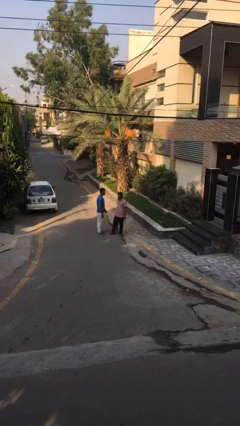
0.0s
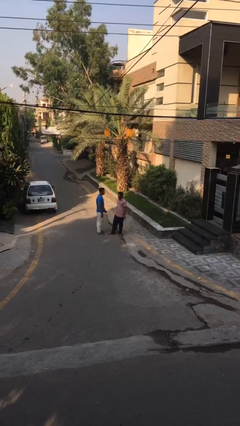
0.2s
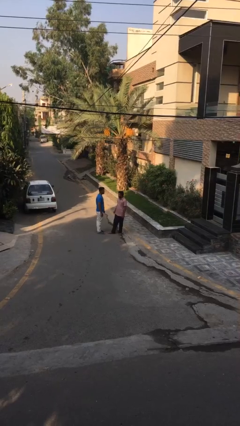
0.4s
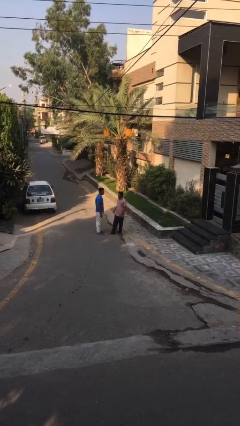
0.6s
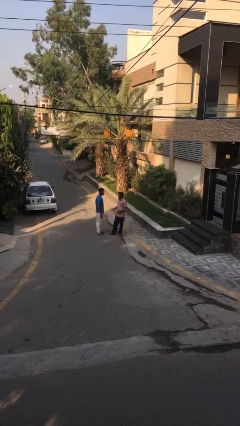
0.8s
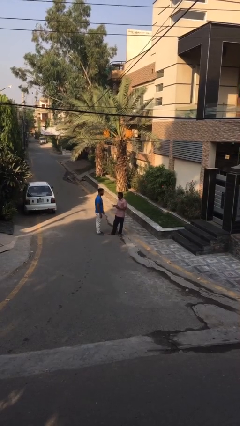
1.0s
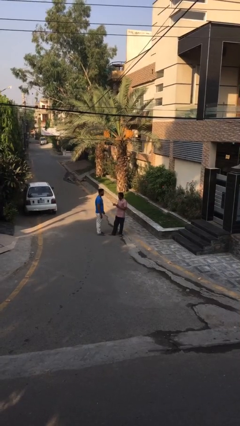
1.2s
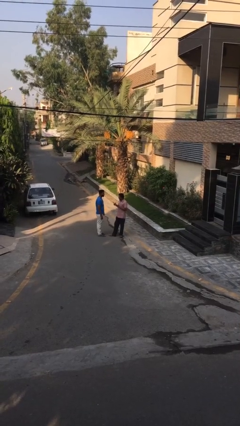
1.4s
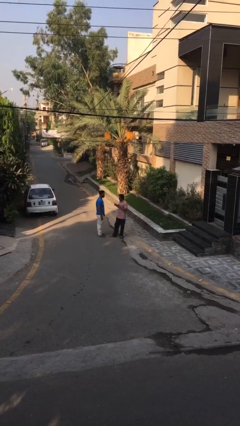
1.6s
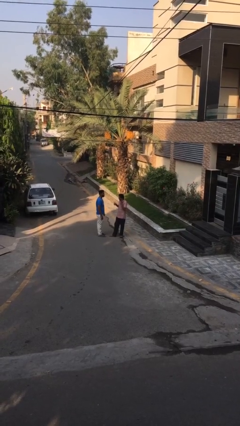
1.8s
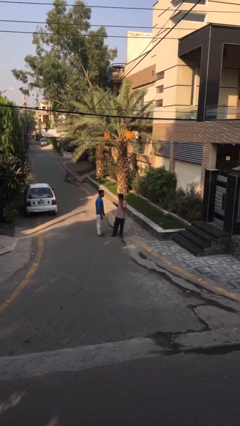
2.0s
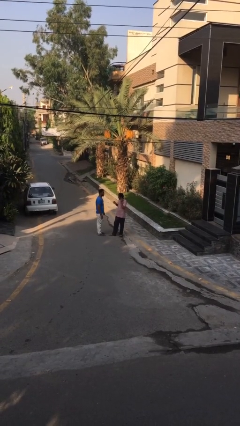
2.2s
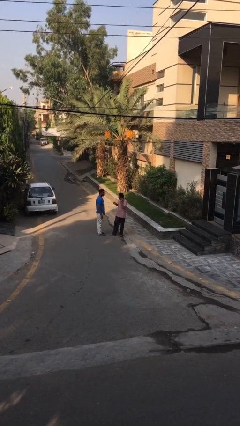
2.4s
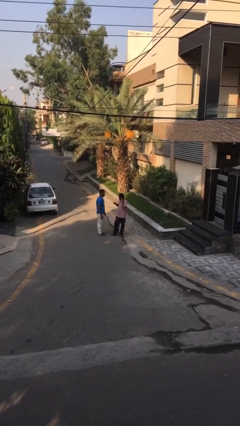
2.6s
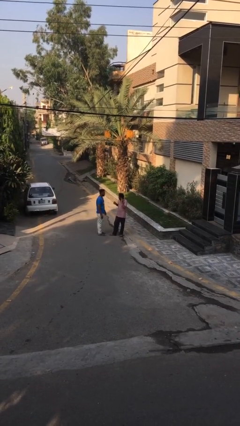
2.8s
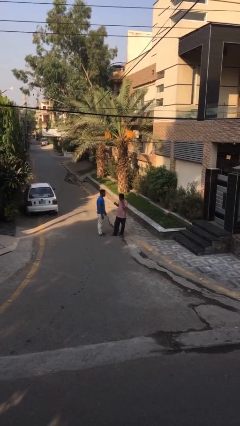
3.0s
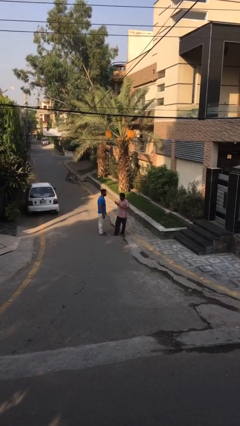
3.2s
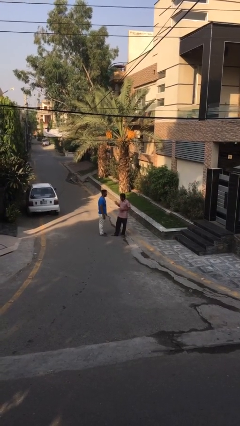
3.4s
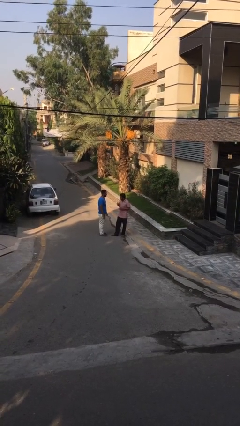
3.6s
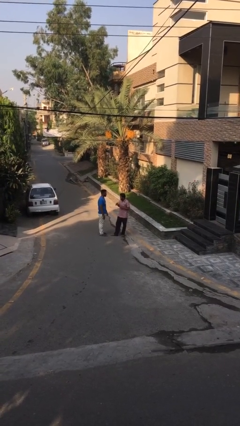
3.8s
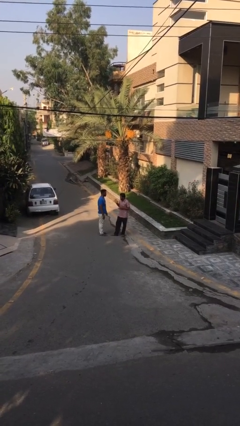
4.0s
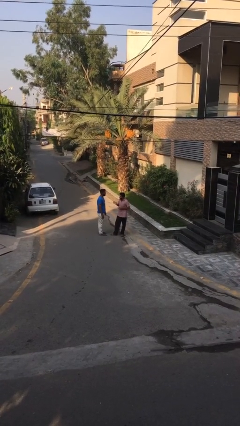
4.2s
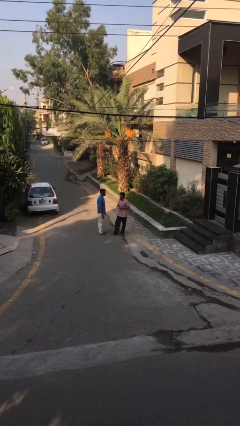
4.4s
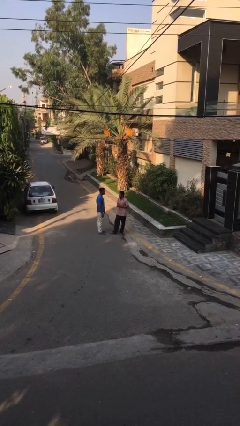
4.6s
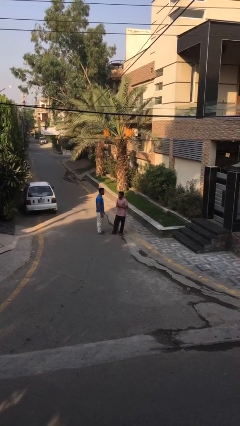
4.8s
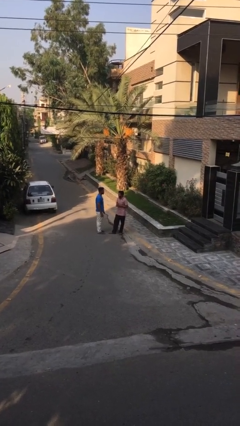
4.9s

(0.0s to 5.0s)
person talks to person

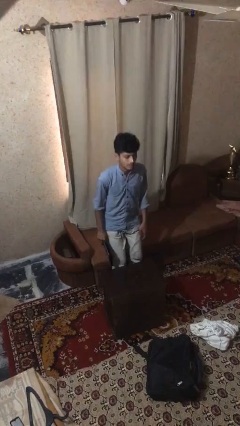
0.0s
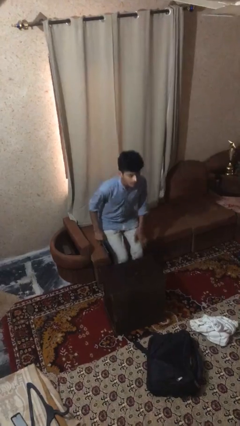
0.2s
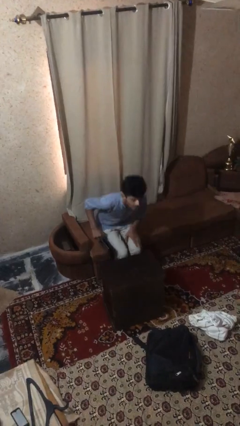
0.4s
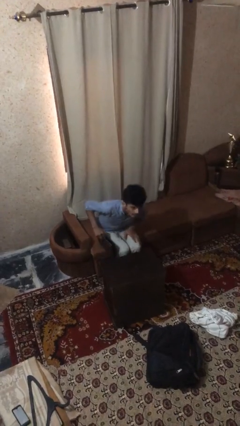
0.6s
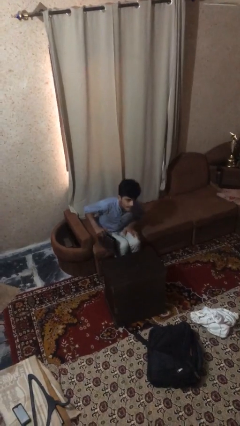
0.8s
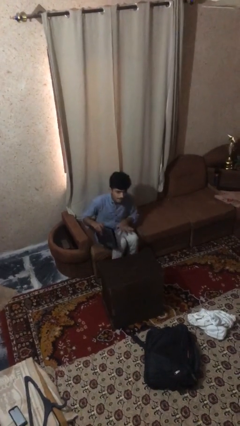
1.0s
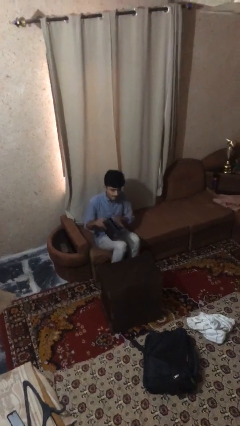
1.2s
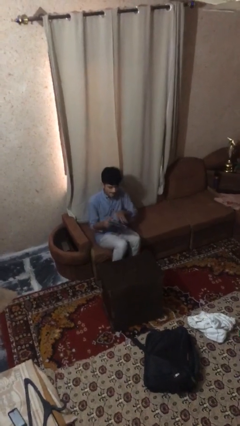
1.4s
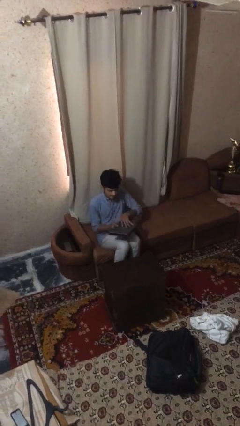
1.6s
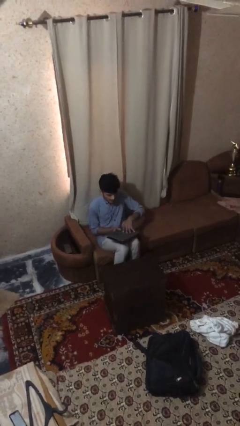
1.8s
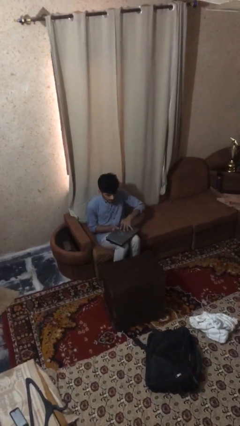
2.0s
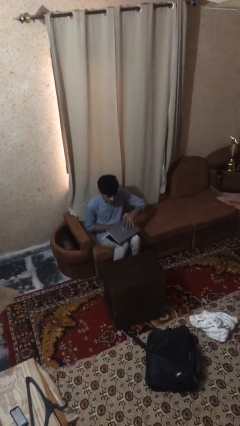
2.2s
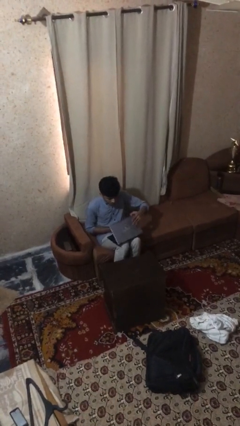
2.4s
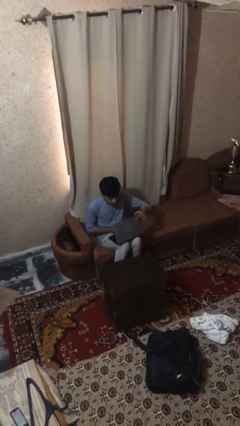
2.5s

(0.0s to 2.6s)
person sits down

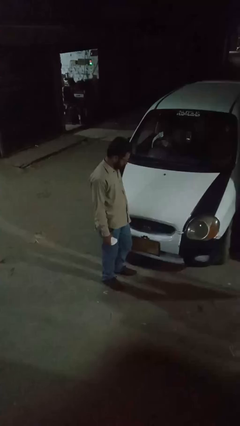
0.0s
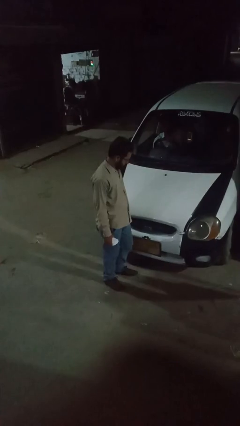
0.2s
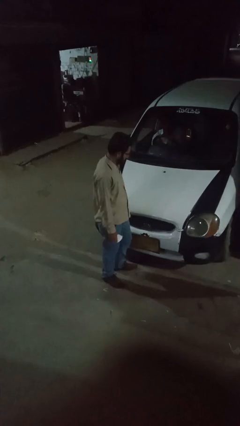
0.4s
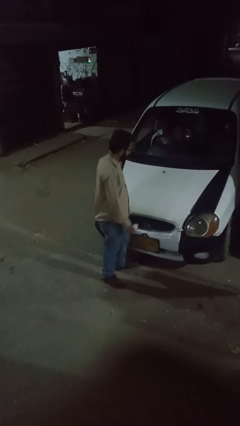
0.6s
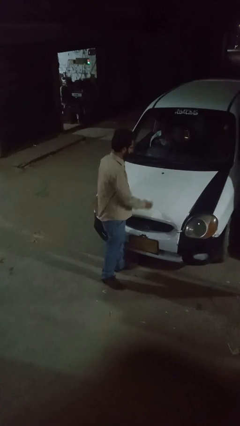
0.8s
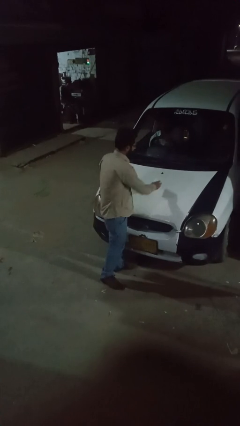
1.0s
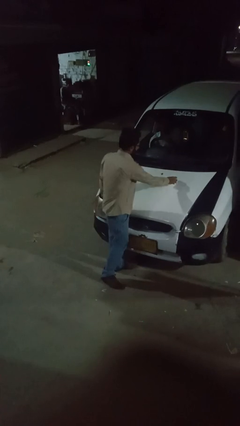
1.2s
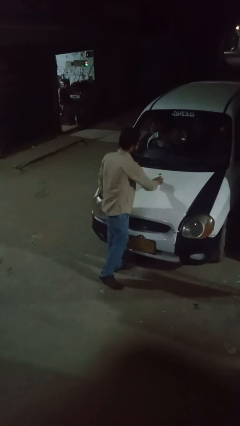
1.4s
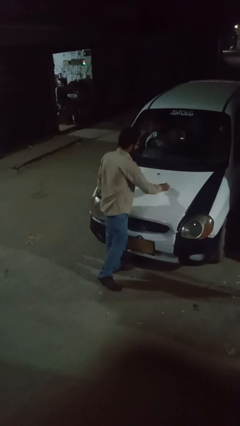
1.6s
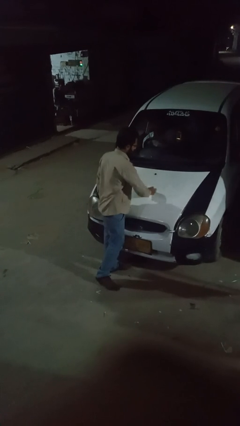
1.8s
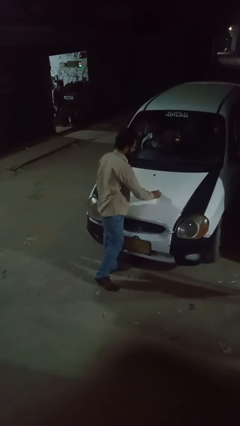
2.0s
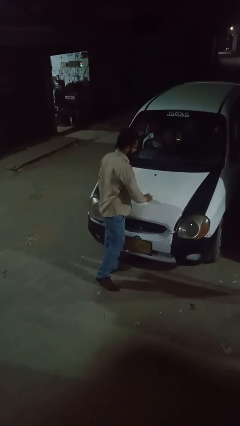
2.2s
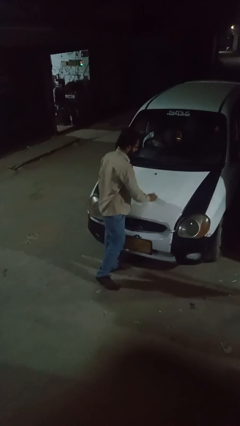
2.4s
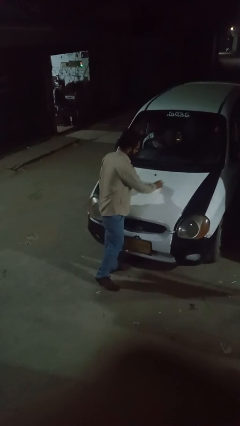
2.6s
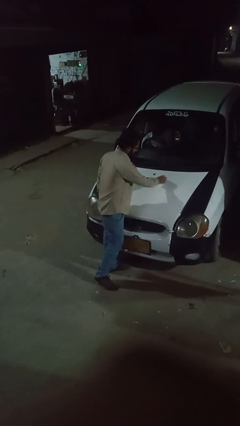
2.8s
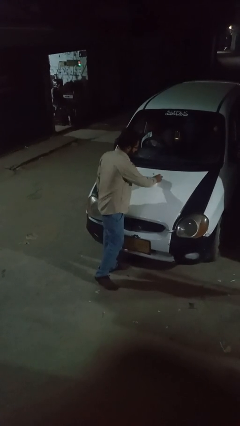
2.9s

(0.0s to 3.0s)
person polishes car with rag

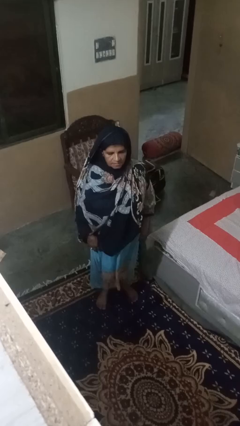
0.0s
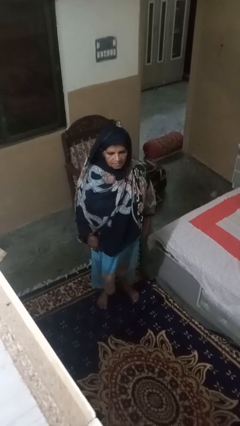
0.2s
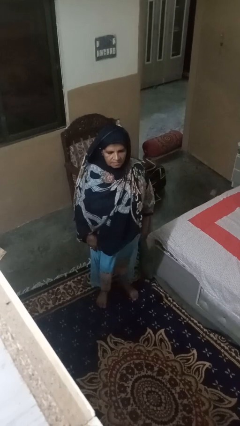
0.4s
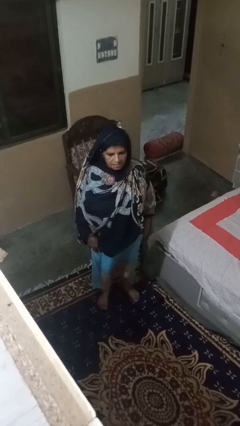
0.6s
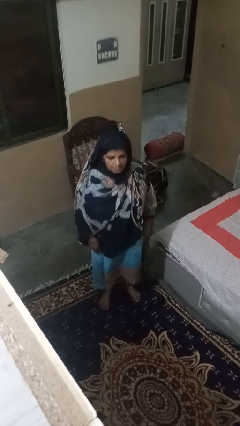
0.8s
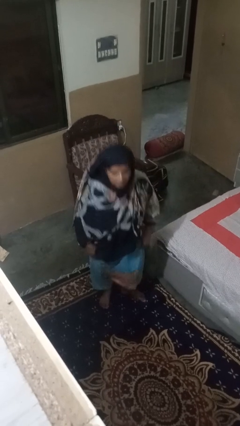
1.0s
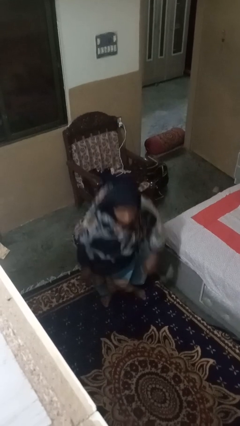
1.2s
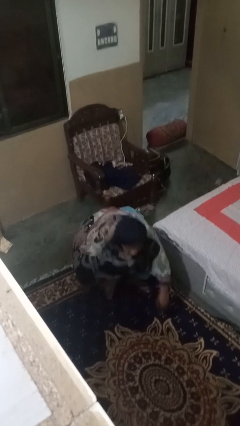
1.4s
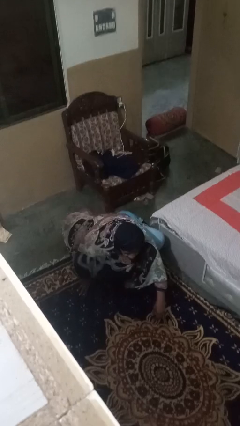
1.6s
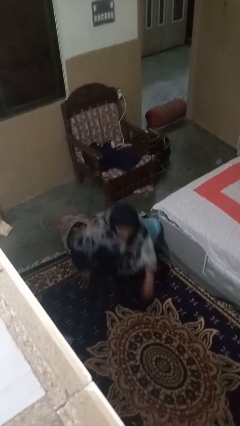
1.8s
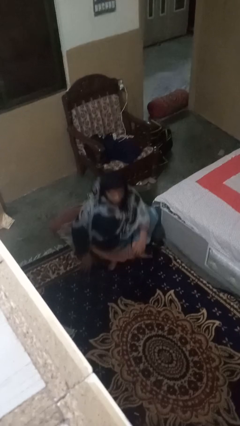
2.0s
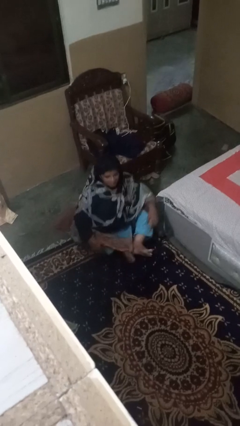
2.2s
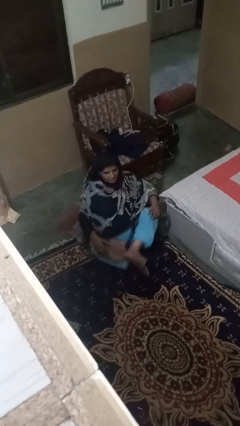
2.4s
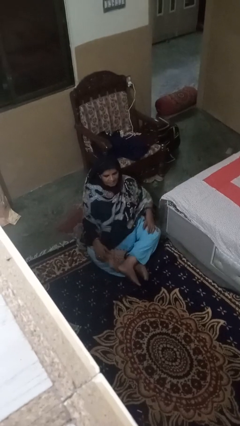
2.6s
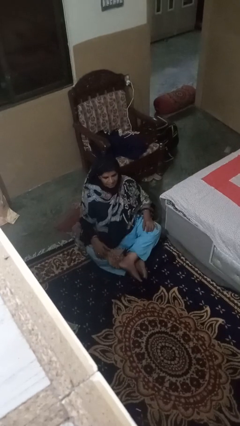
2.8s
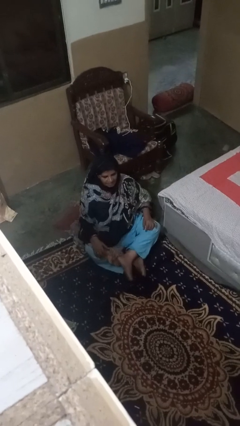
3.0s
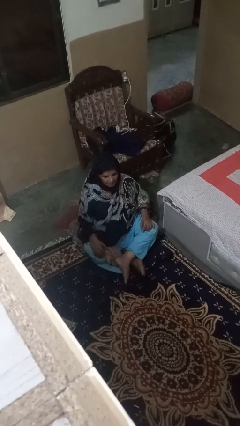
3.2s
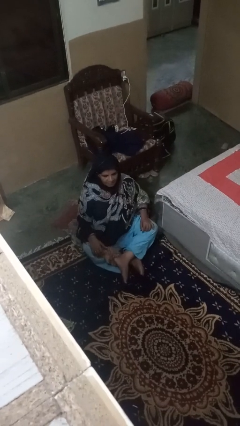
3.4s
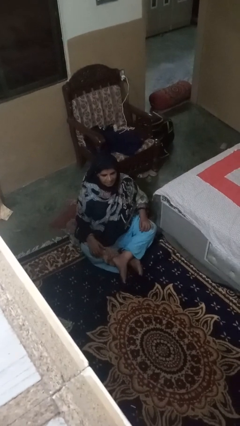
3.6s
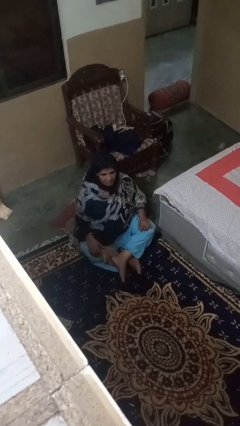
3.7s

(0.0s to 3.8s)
person sits crisscross

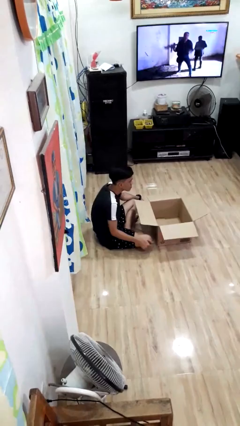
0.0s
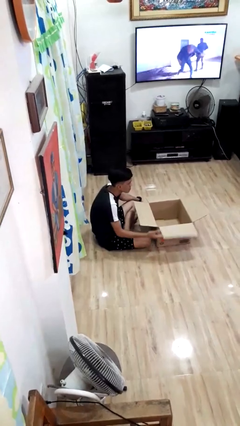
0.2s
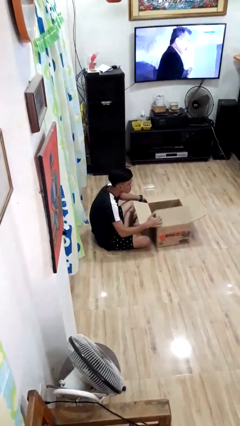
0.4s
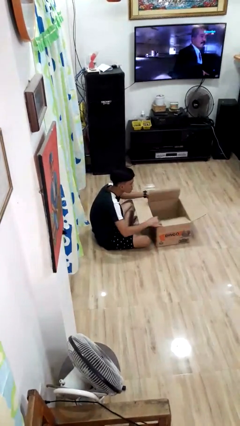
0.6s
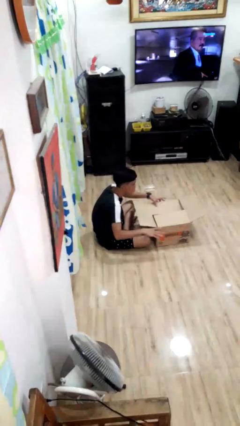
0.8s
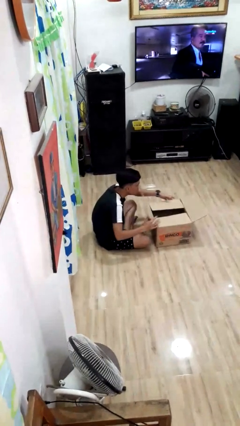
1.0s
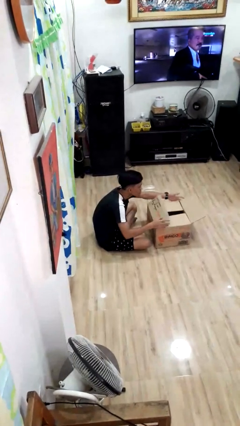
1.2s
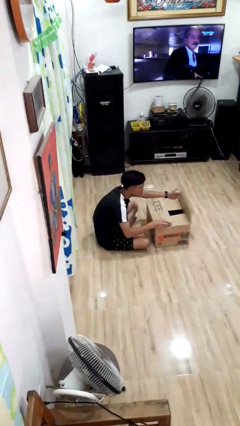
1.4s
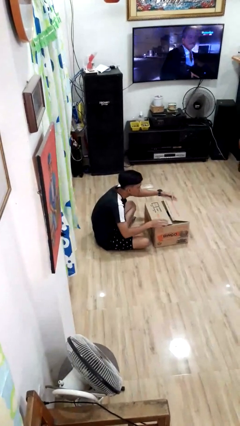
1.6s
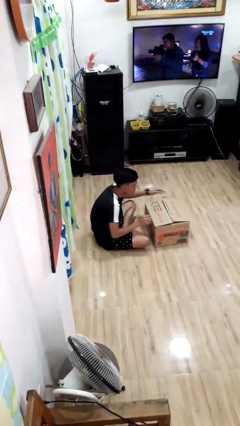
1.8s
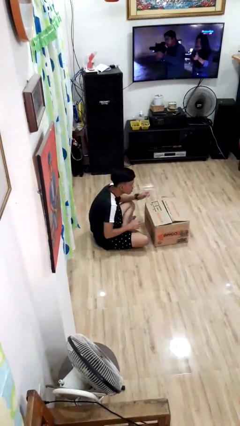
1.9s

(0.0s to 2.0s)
person closes box

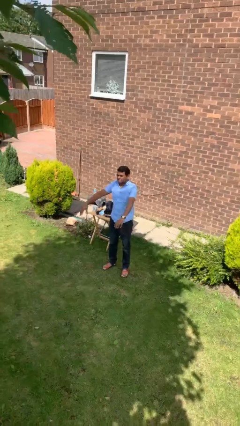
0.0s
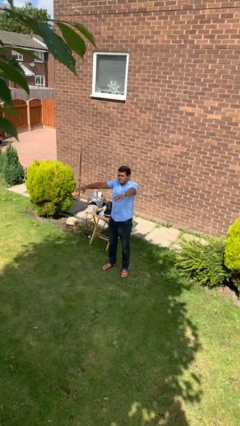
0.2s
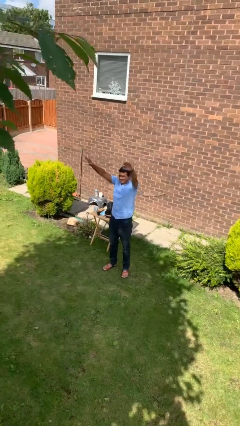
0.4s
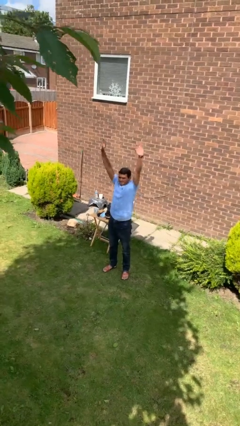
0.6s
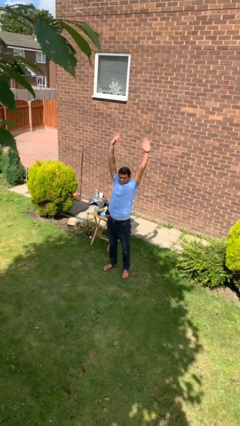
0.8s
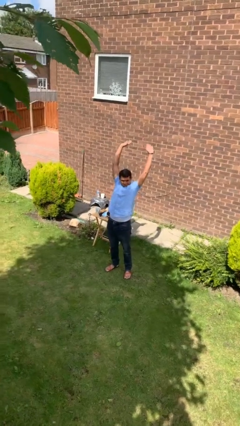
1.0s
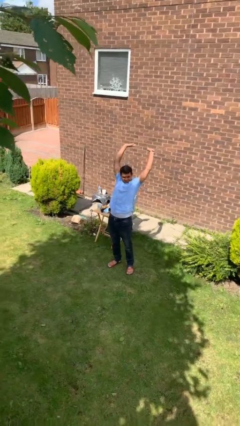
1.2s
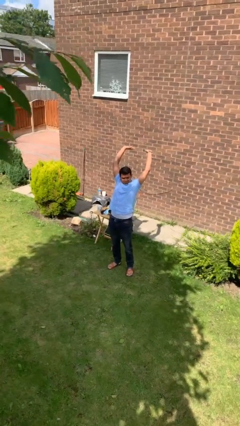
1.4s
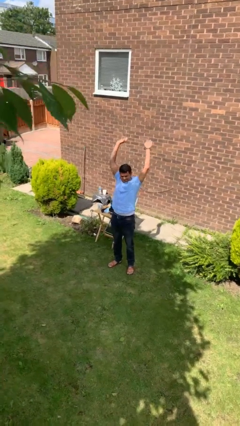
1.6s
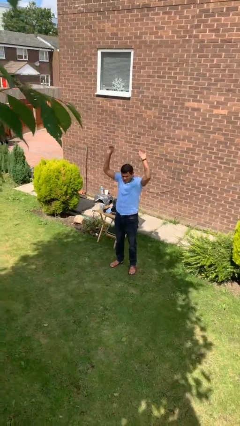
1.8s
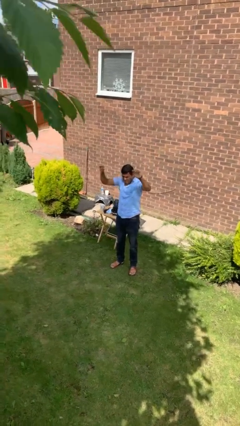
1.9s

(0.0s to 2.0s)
person stretches arms over head
